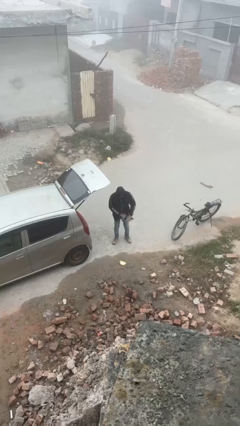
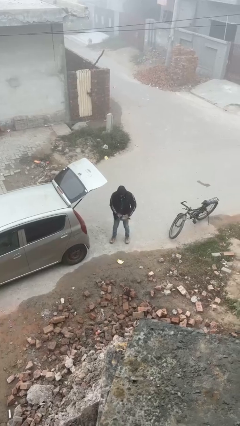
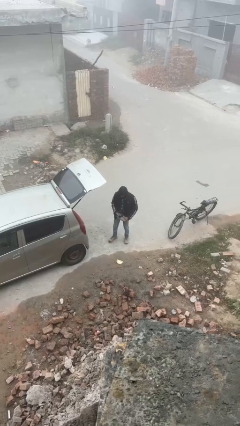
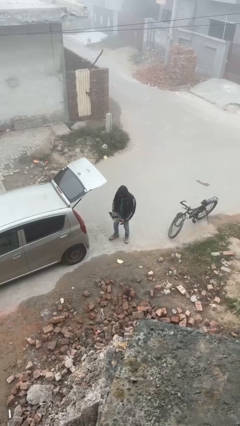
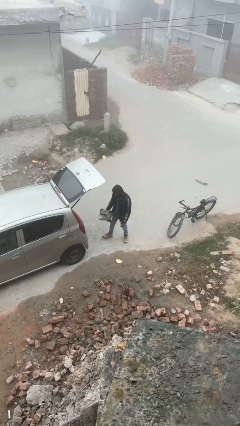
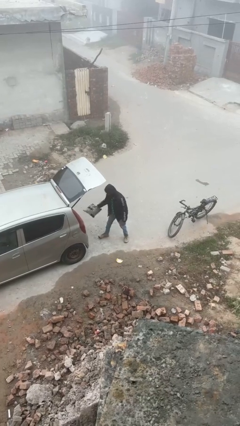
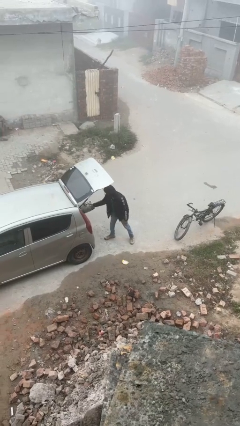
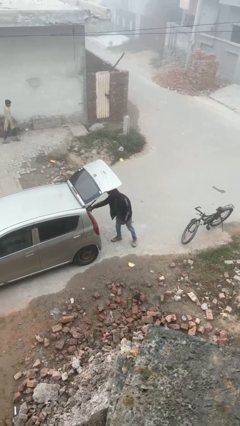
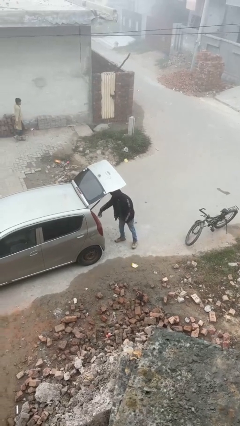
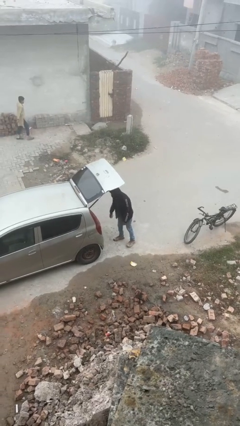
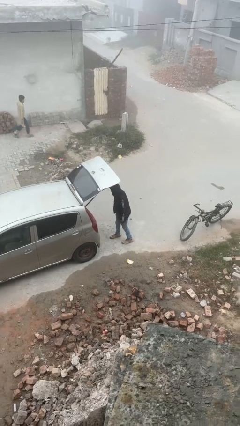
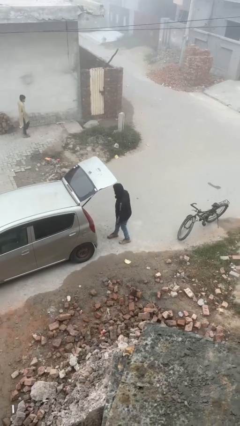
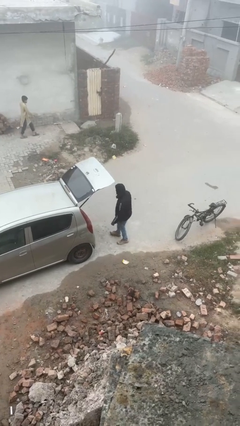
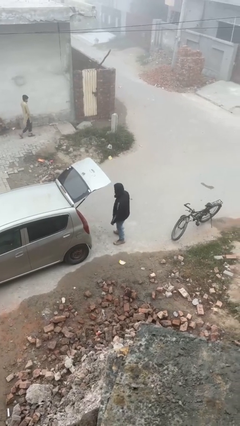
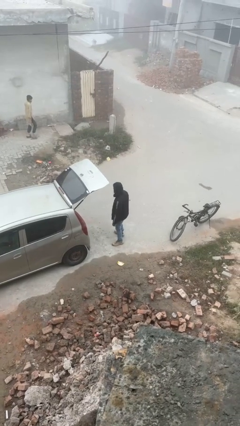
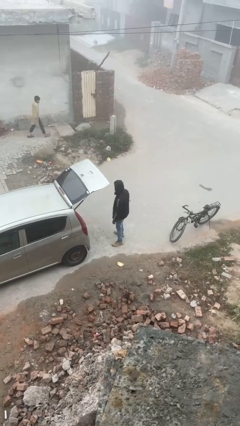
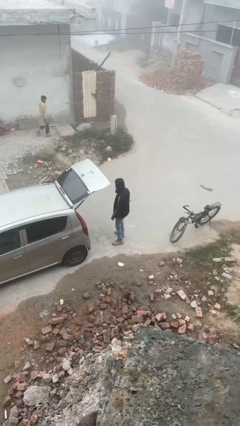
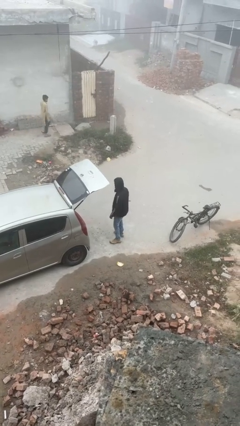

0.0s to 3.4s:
person loads car

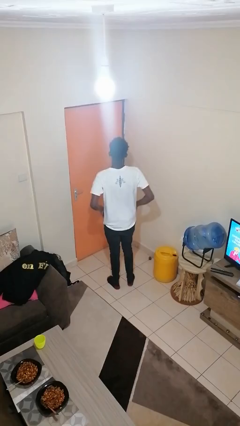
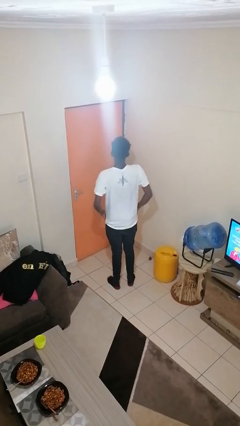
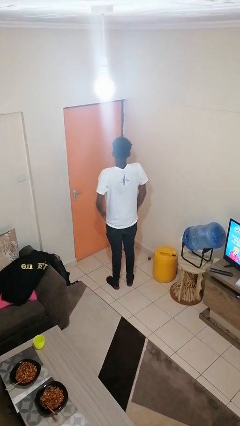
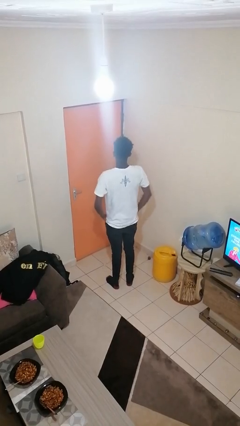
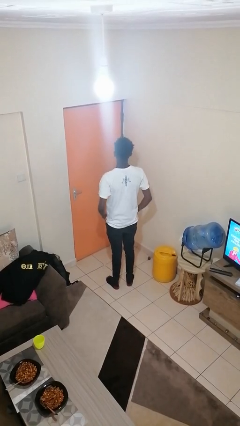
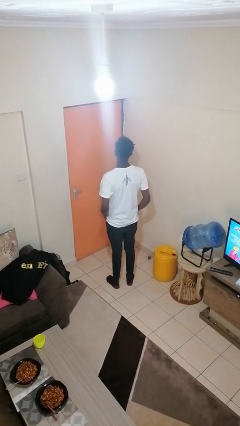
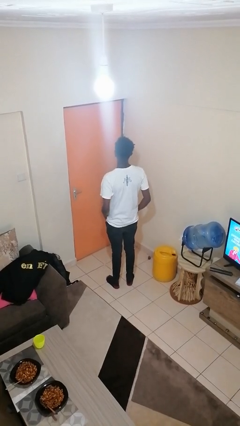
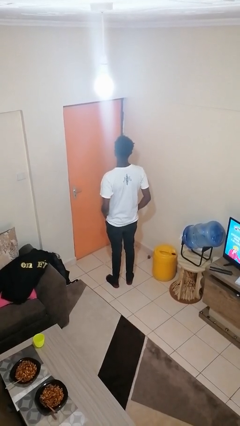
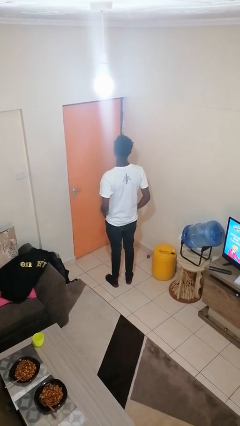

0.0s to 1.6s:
person puts hands in back pockets

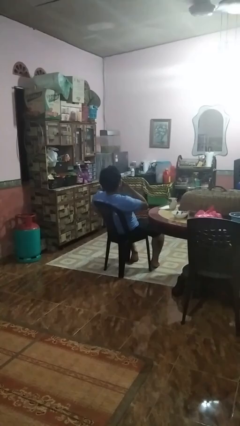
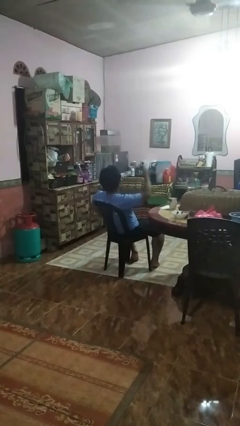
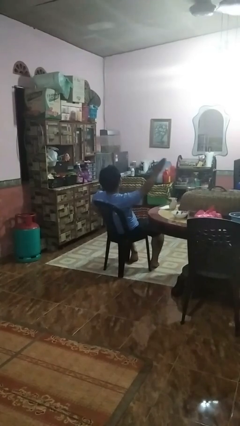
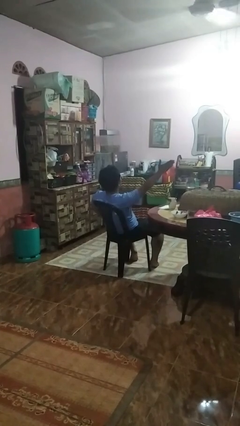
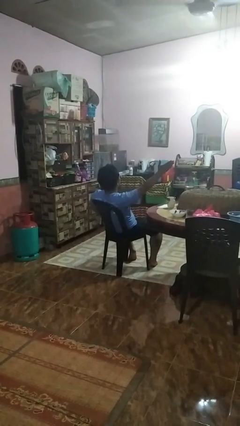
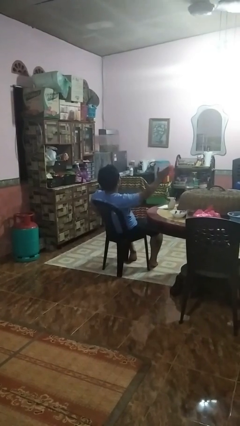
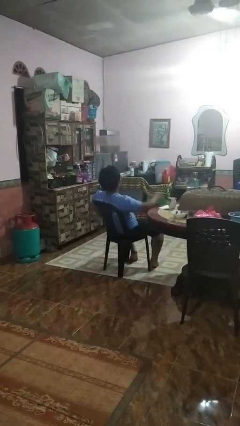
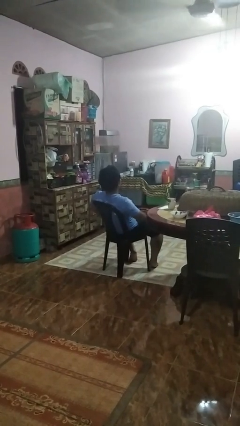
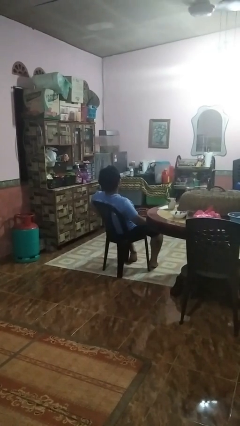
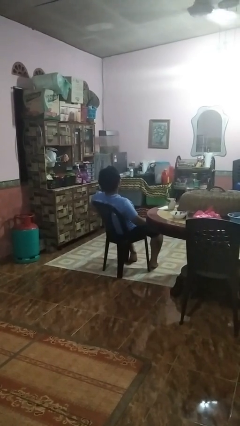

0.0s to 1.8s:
person gestures blow kiss

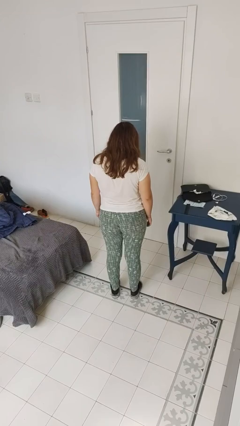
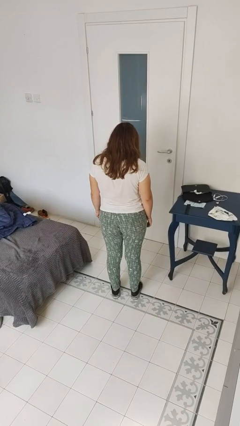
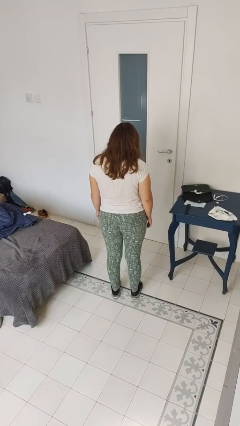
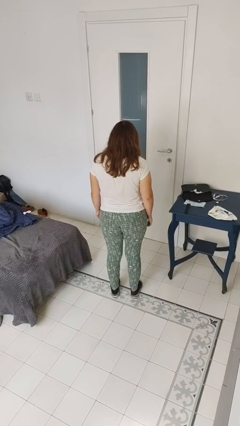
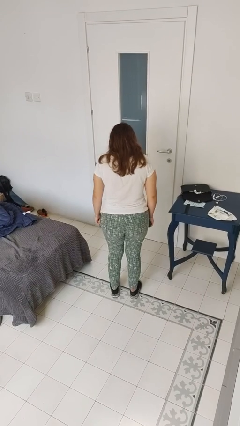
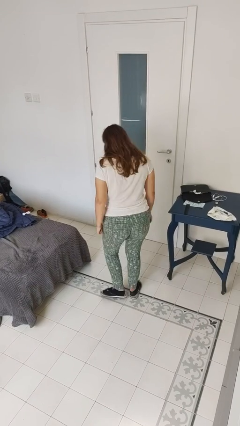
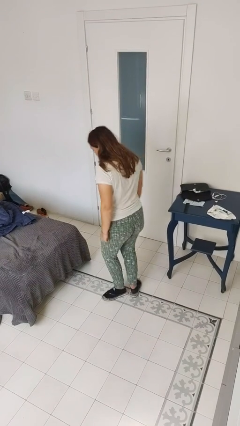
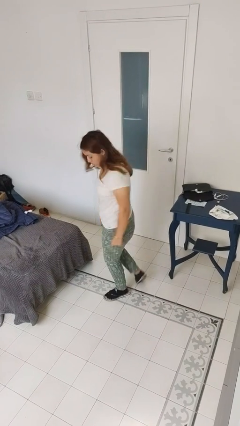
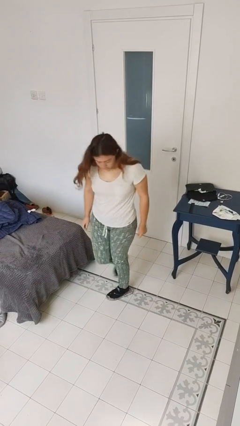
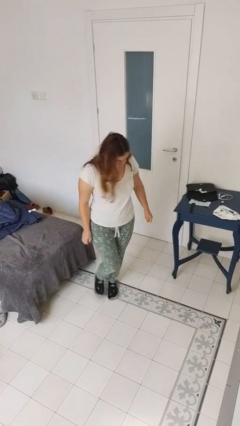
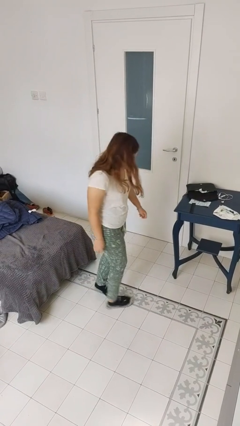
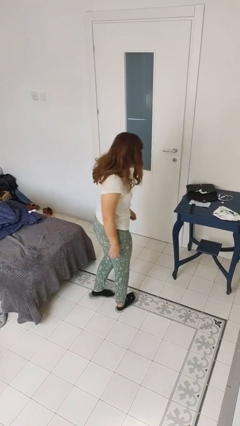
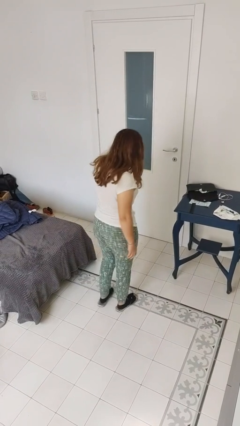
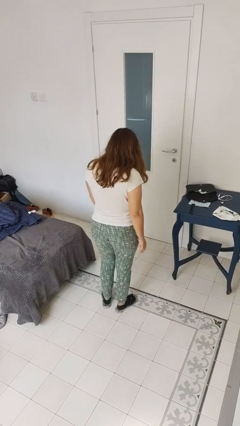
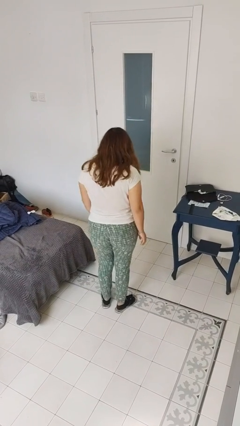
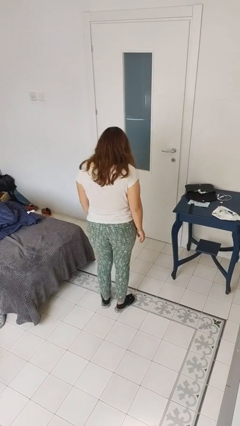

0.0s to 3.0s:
person twirls

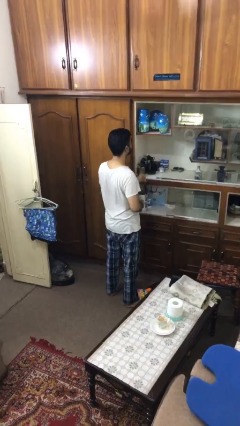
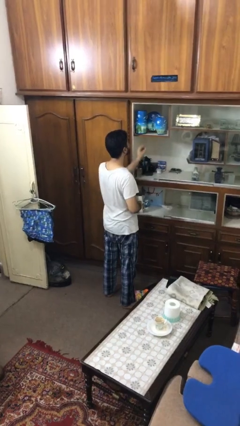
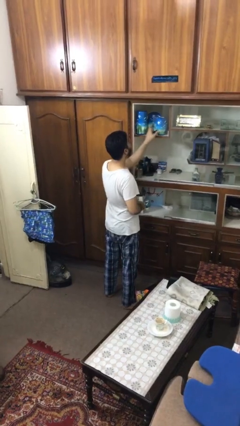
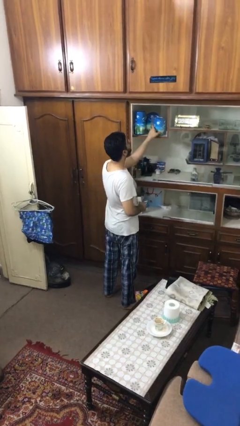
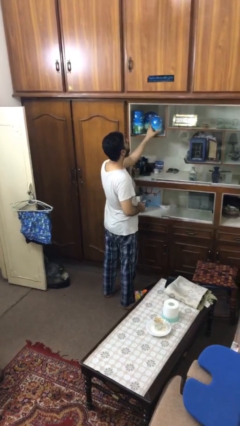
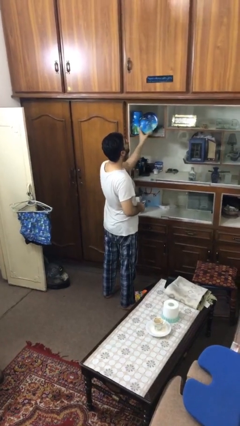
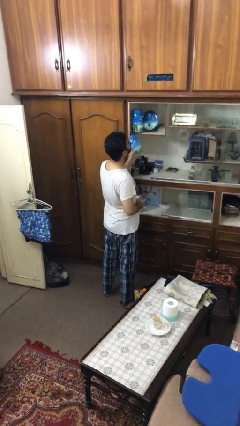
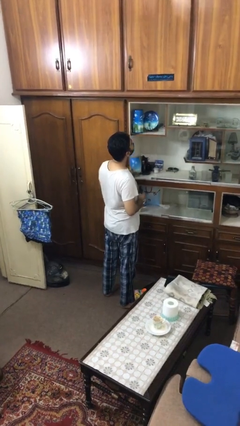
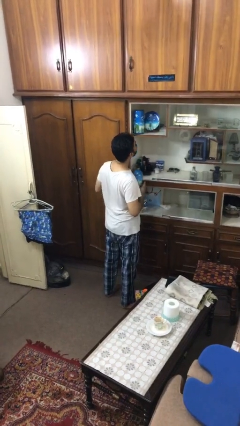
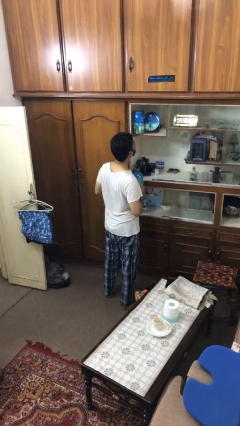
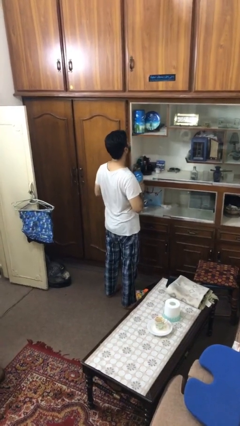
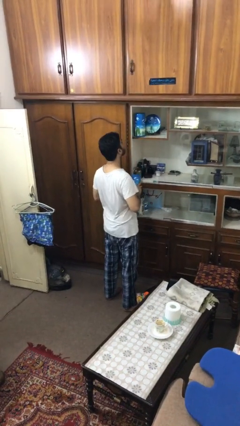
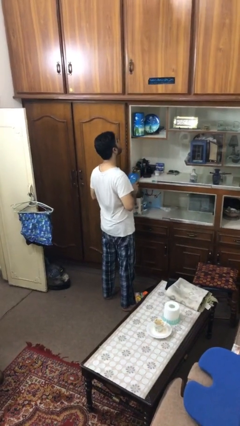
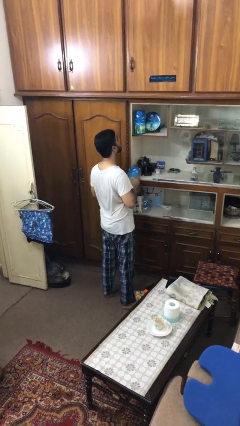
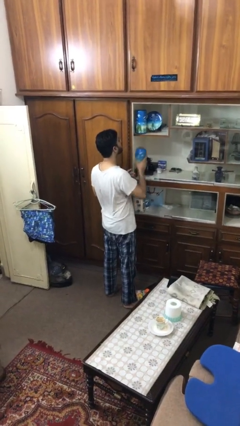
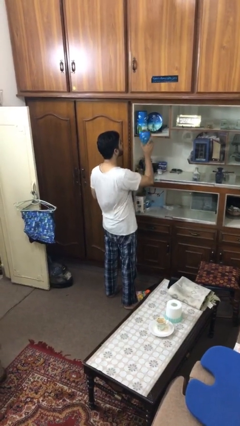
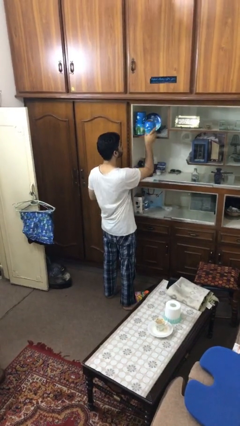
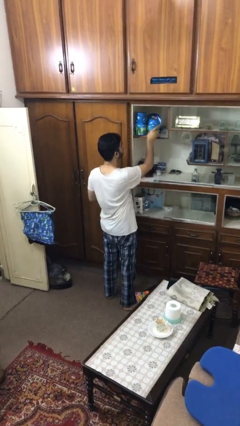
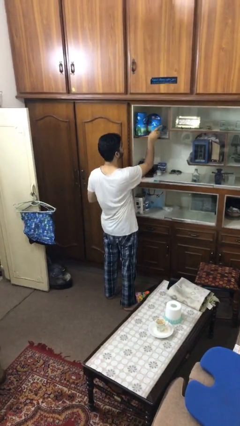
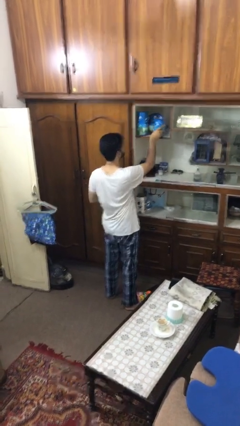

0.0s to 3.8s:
person searches in cabinet

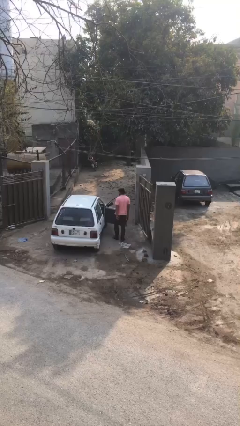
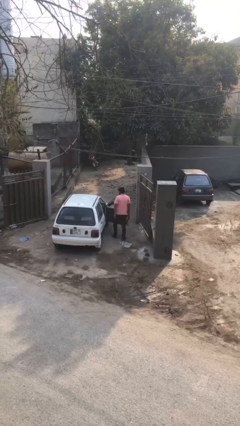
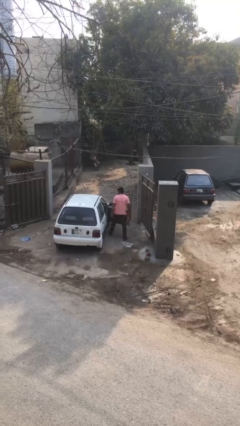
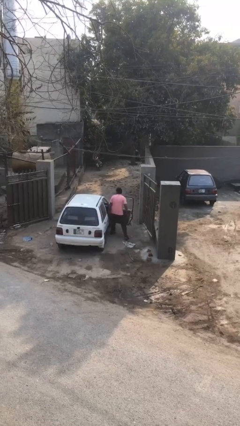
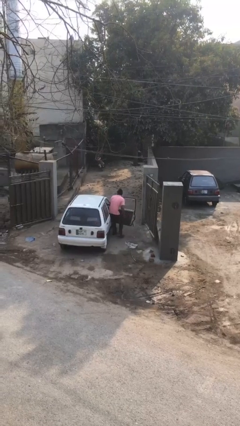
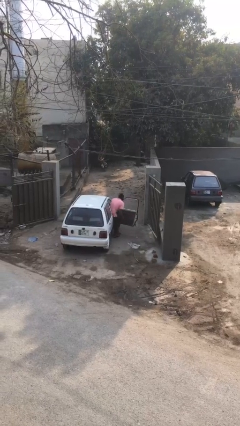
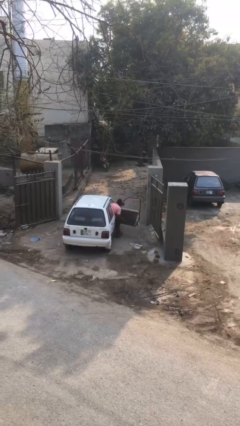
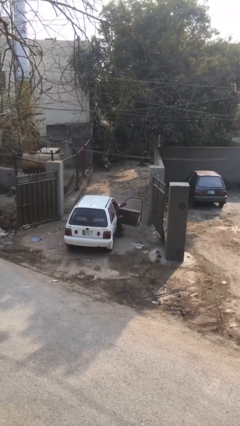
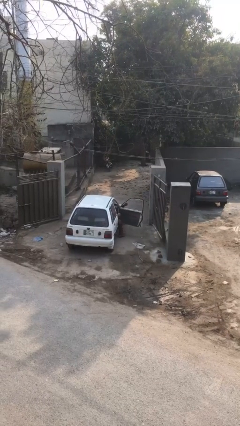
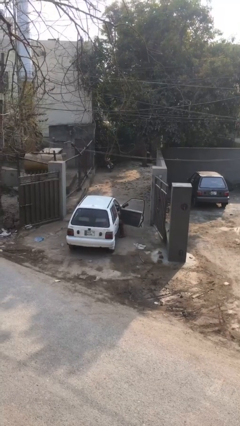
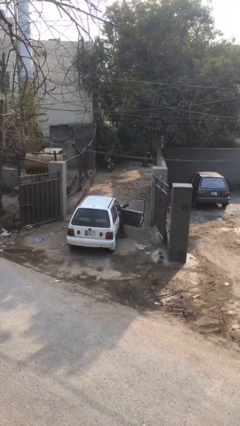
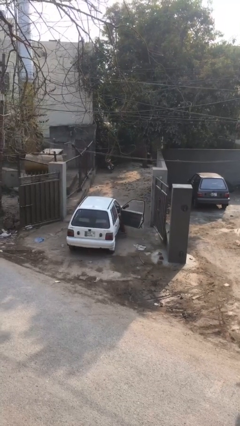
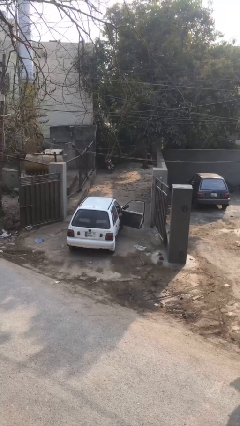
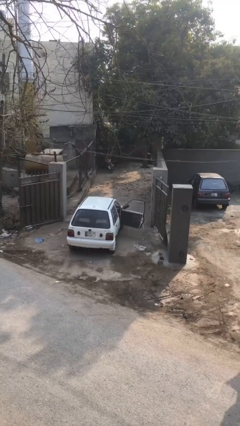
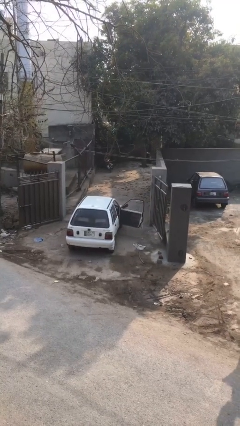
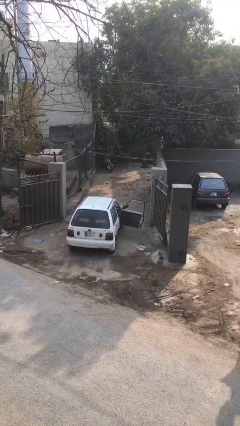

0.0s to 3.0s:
person enters car

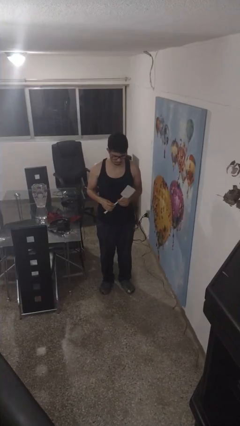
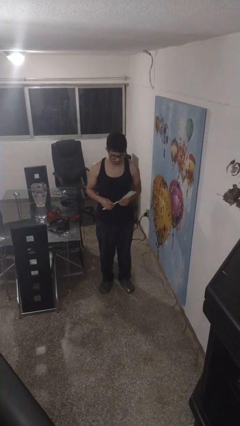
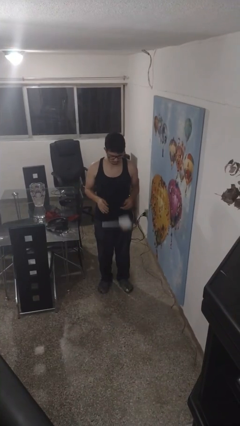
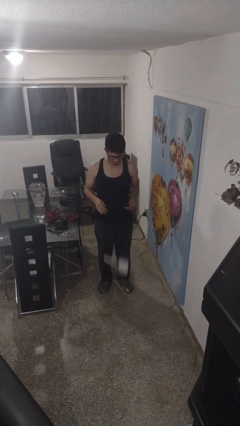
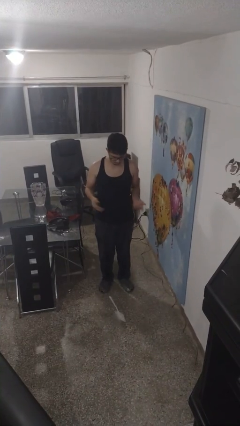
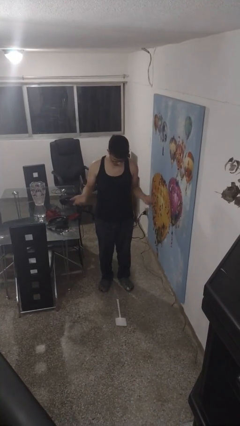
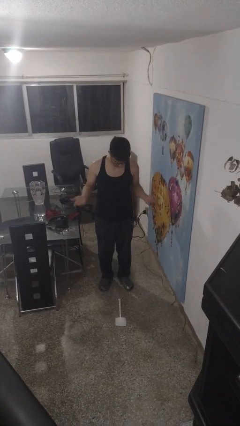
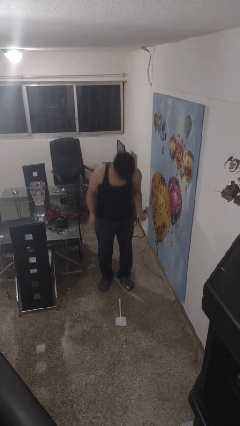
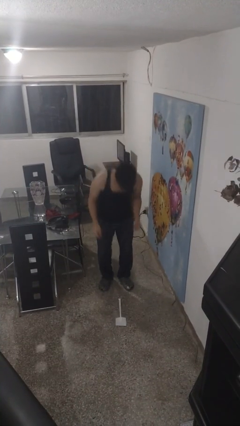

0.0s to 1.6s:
person drops object
